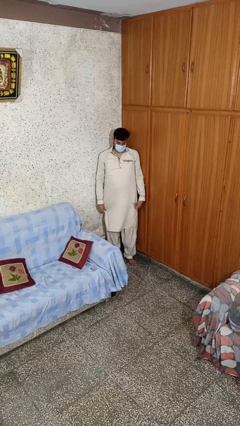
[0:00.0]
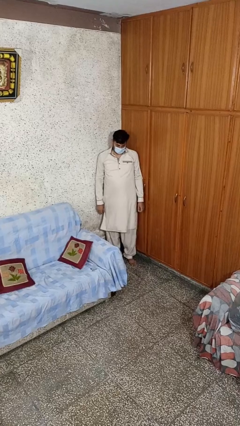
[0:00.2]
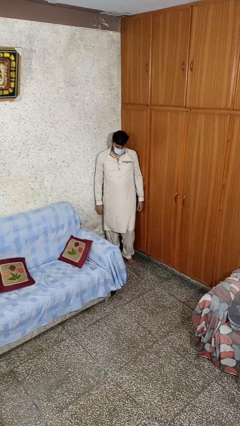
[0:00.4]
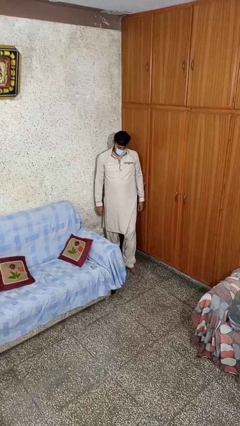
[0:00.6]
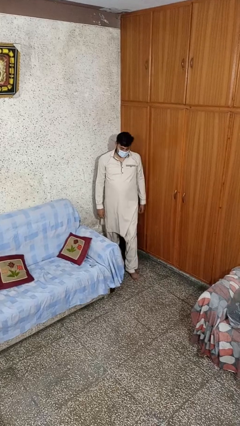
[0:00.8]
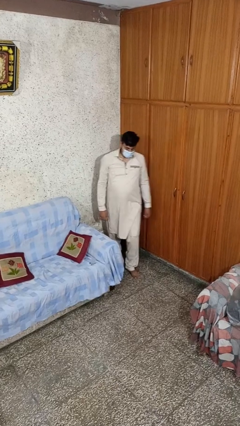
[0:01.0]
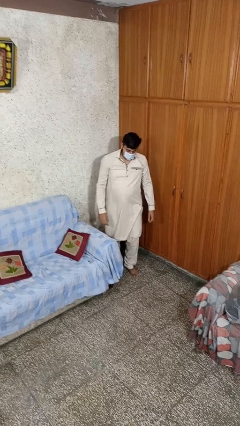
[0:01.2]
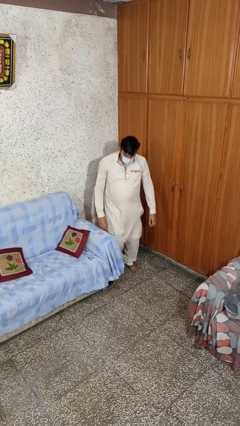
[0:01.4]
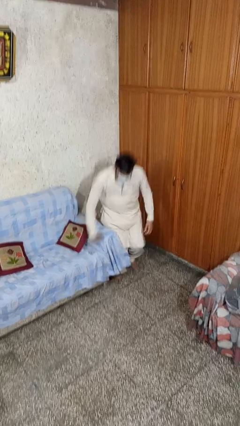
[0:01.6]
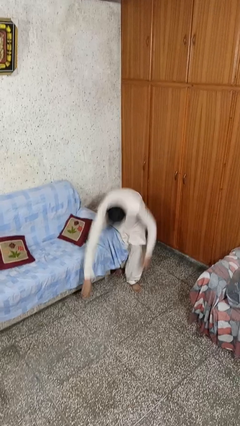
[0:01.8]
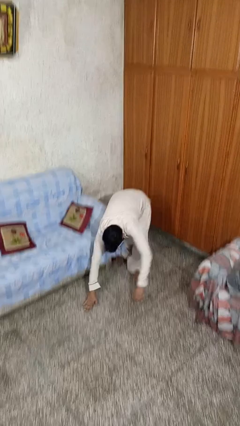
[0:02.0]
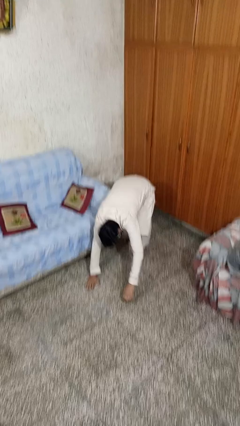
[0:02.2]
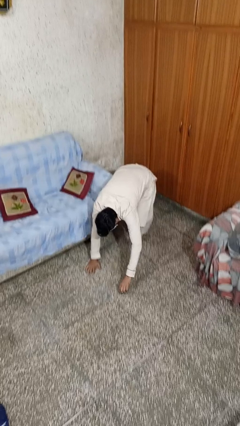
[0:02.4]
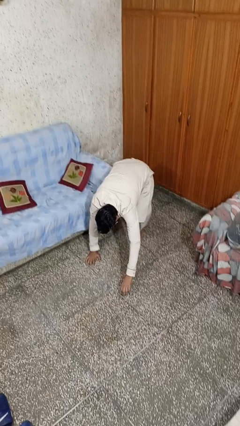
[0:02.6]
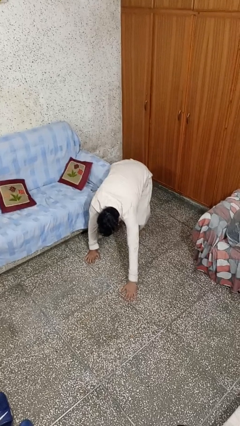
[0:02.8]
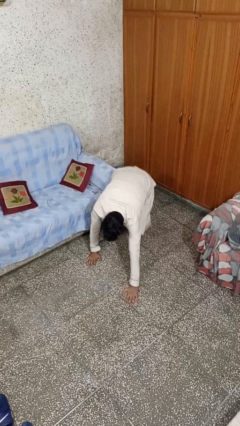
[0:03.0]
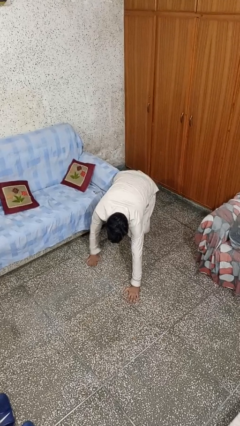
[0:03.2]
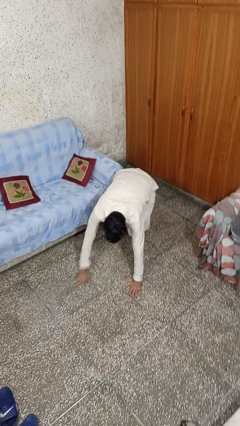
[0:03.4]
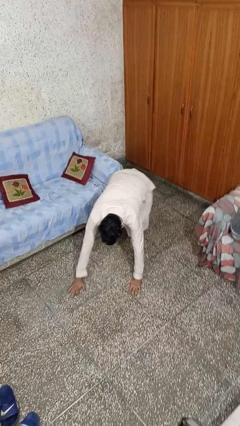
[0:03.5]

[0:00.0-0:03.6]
person trips on object on floor

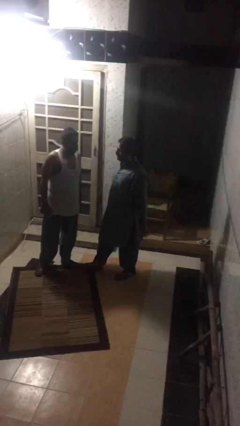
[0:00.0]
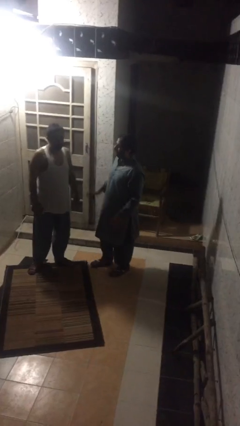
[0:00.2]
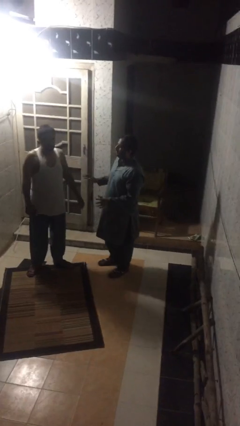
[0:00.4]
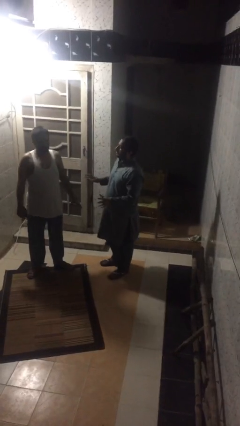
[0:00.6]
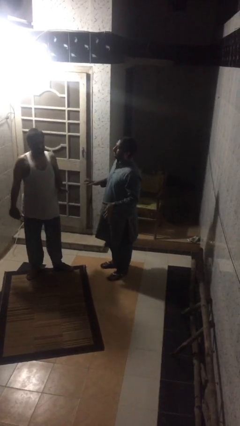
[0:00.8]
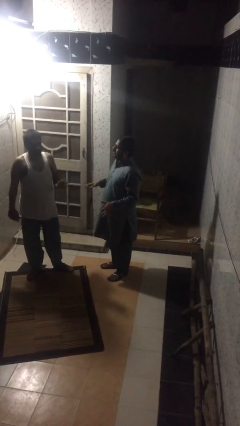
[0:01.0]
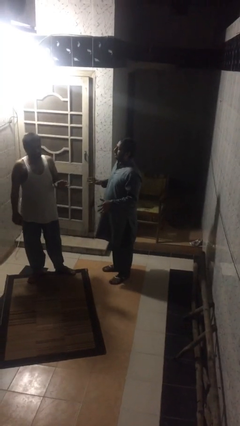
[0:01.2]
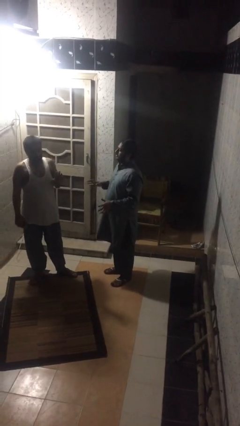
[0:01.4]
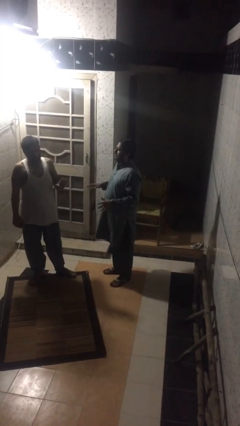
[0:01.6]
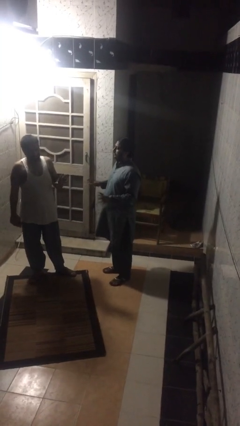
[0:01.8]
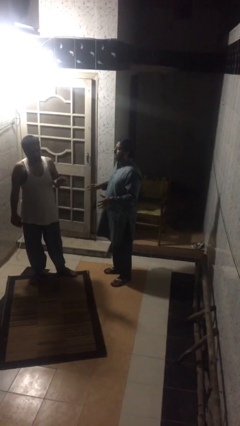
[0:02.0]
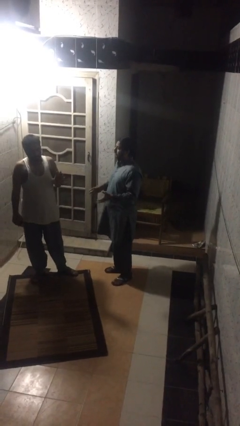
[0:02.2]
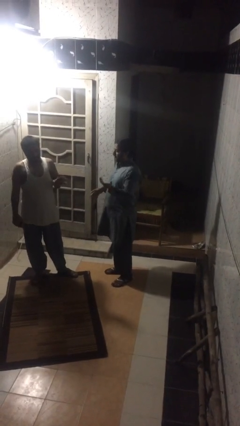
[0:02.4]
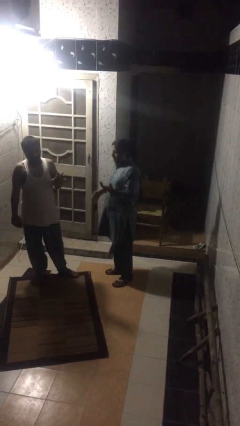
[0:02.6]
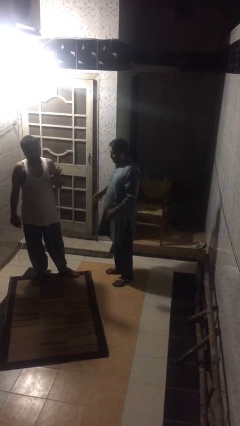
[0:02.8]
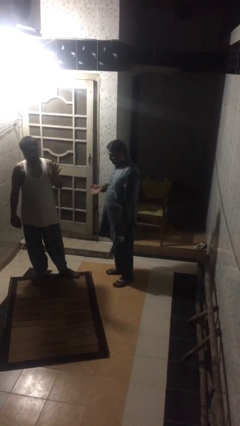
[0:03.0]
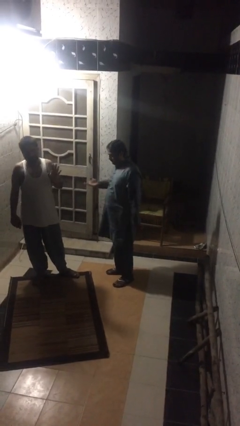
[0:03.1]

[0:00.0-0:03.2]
person talks to person

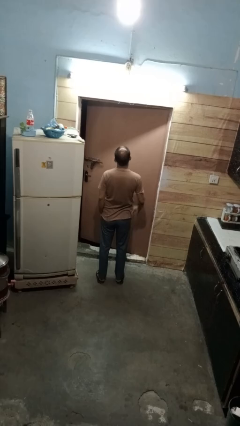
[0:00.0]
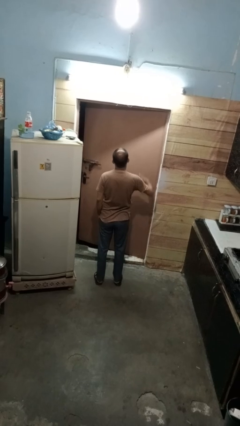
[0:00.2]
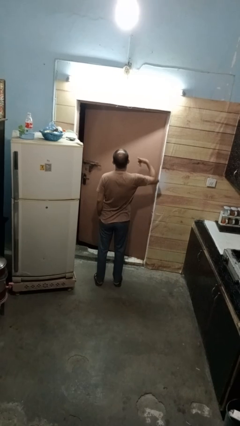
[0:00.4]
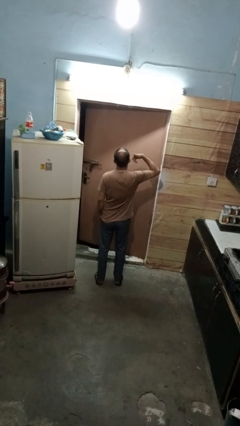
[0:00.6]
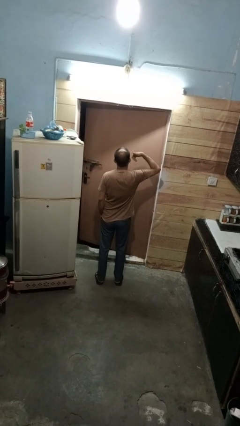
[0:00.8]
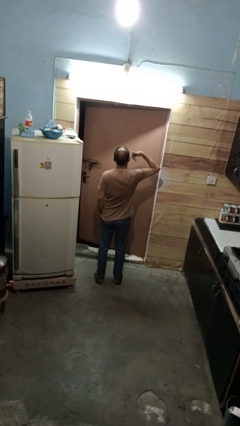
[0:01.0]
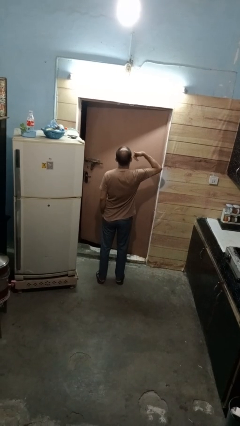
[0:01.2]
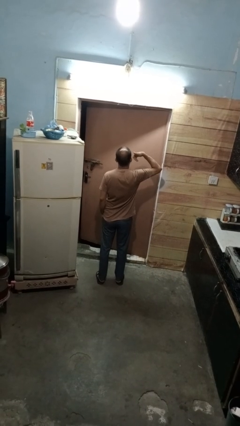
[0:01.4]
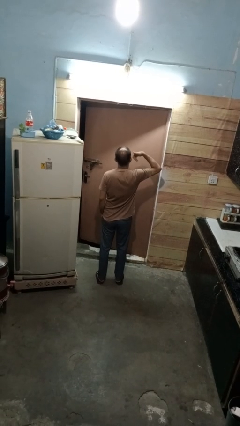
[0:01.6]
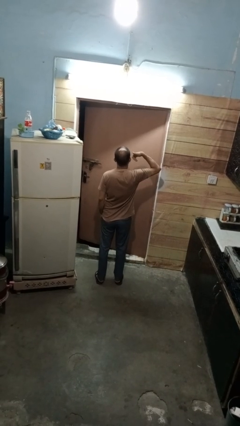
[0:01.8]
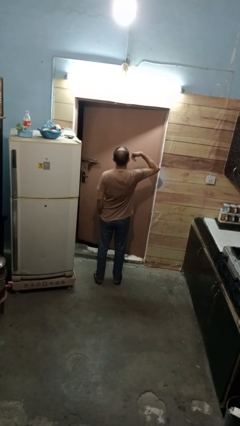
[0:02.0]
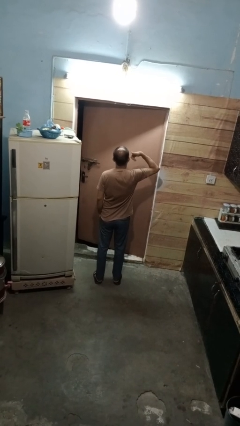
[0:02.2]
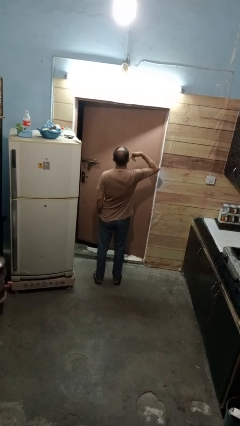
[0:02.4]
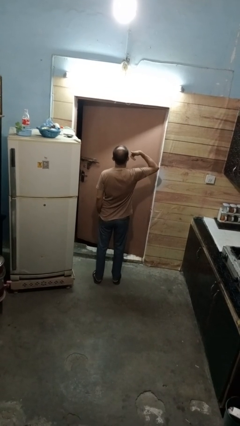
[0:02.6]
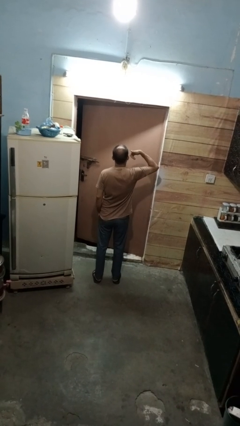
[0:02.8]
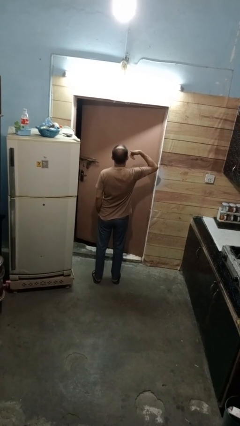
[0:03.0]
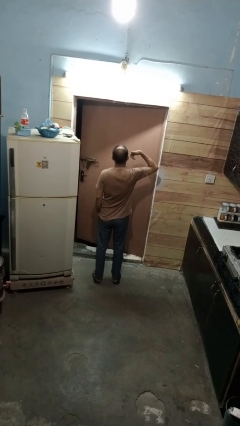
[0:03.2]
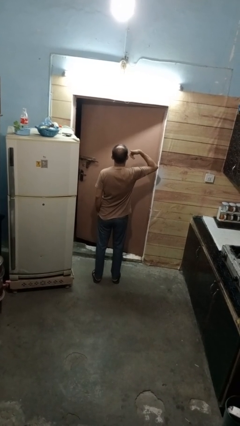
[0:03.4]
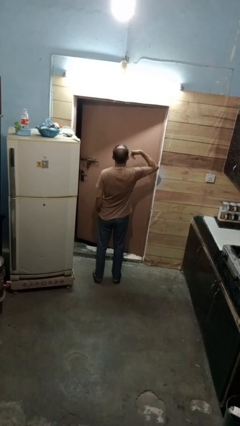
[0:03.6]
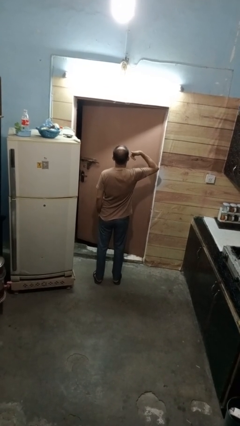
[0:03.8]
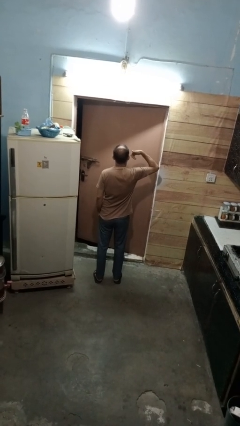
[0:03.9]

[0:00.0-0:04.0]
person gestures call me

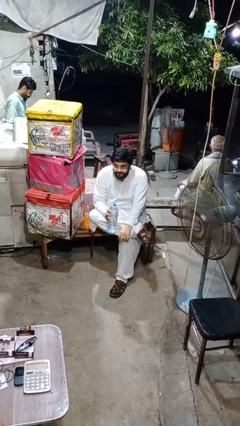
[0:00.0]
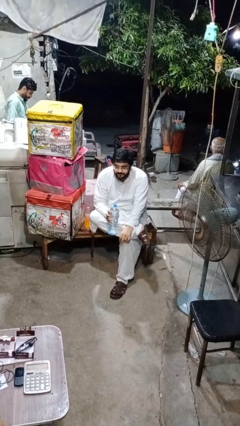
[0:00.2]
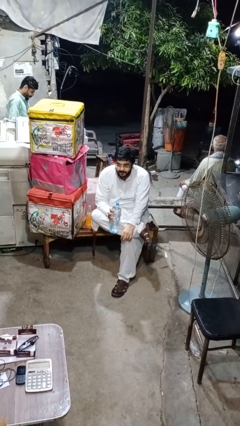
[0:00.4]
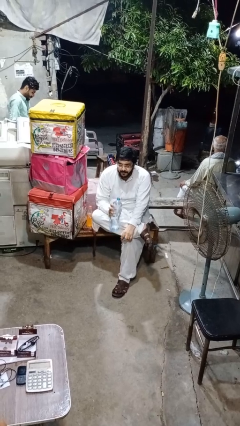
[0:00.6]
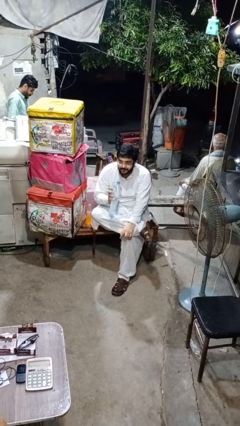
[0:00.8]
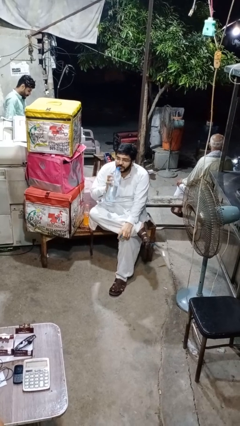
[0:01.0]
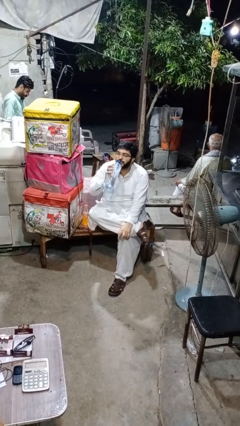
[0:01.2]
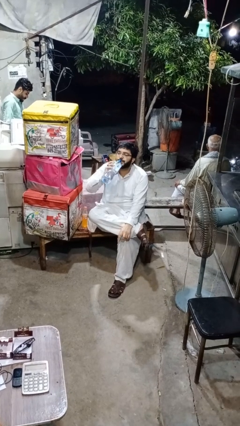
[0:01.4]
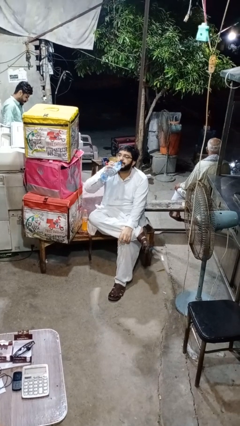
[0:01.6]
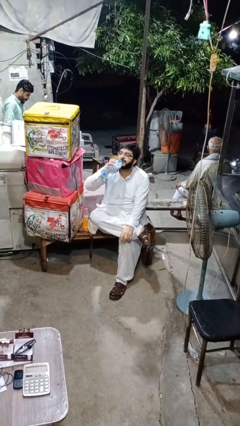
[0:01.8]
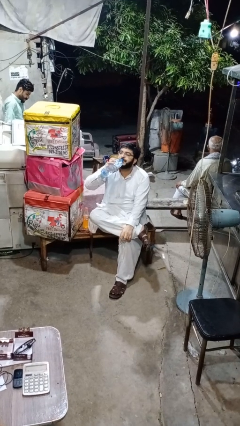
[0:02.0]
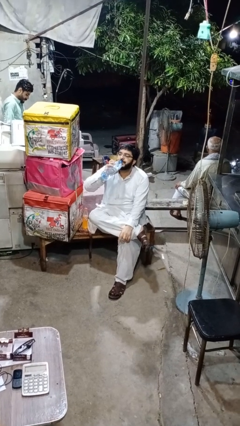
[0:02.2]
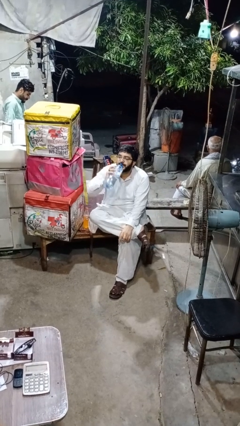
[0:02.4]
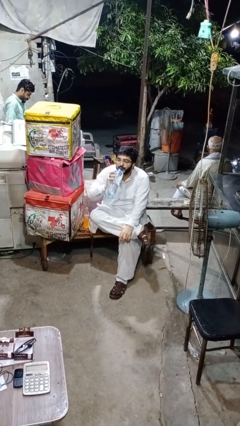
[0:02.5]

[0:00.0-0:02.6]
person drinks from bottle

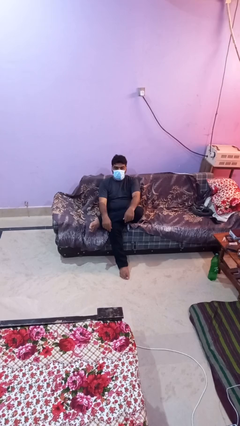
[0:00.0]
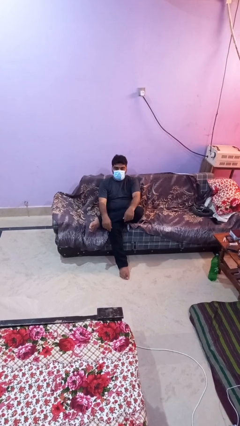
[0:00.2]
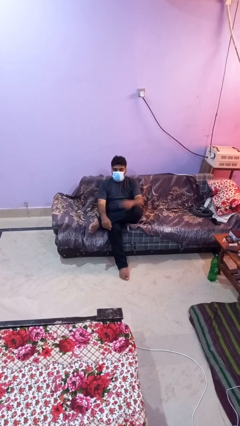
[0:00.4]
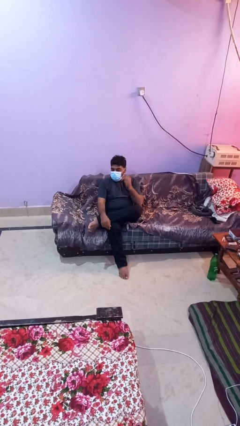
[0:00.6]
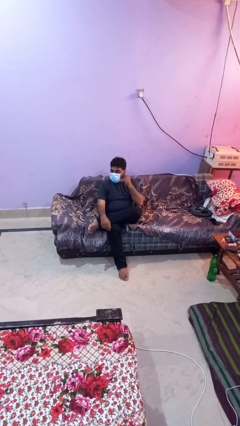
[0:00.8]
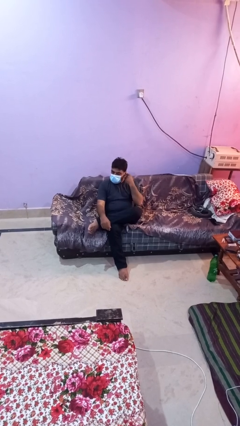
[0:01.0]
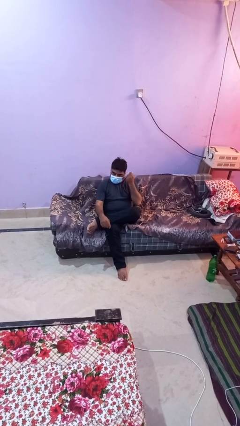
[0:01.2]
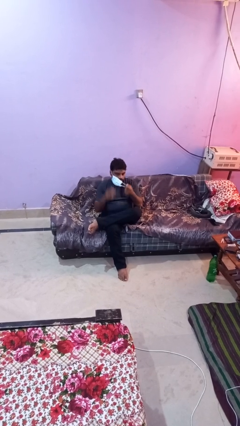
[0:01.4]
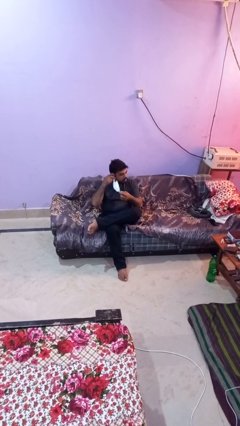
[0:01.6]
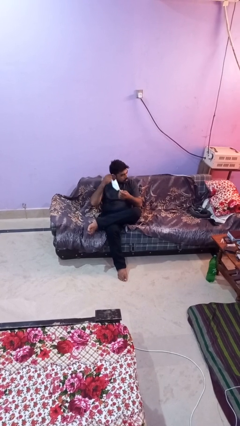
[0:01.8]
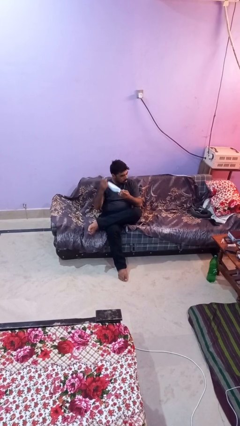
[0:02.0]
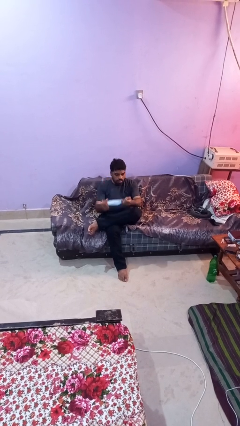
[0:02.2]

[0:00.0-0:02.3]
person takes off facemask

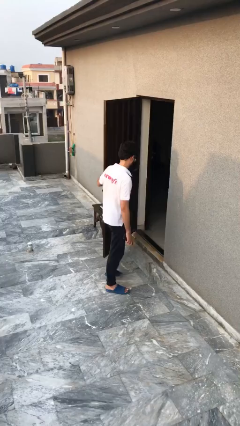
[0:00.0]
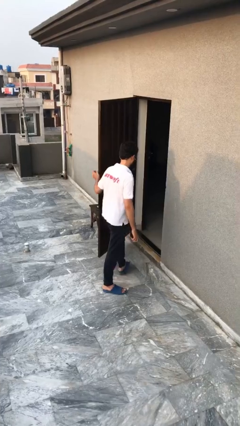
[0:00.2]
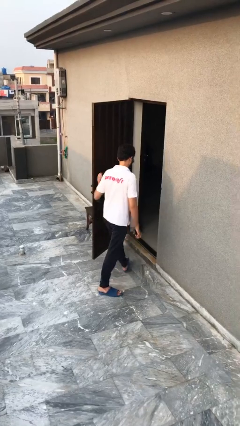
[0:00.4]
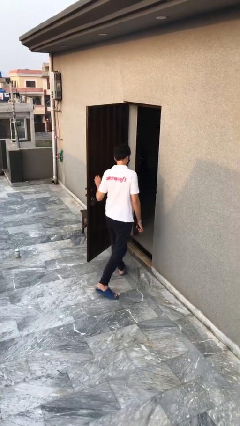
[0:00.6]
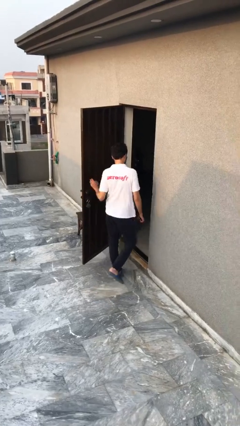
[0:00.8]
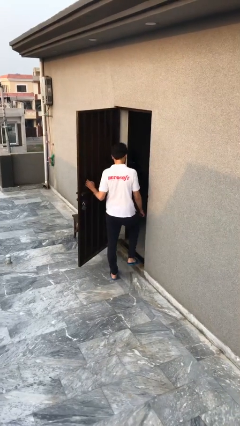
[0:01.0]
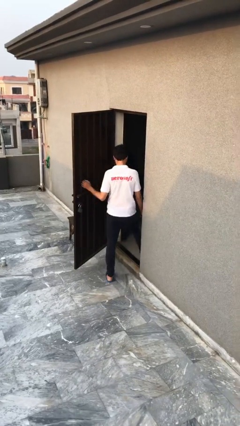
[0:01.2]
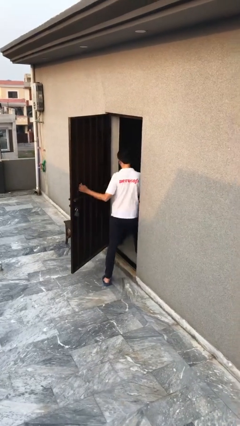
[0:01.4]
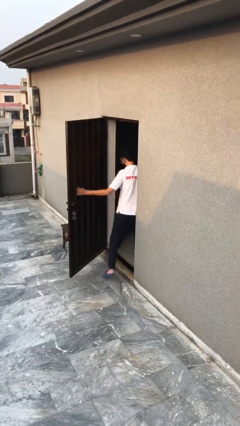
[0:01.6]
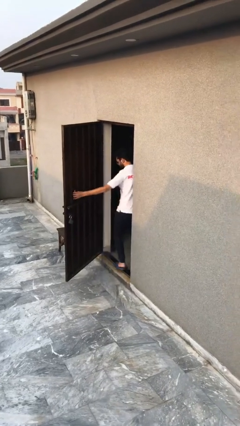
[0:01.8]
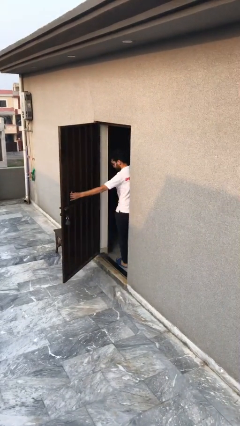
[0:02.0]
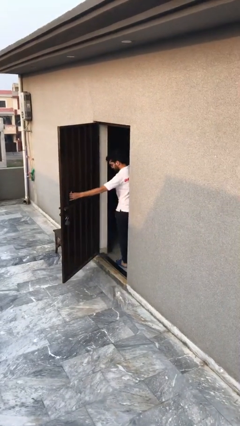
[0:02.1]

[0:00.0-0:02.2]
person exits scene through structure
